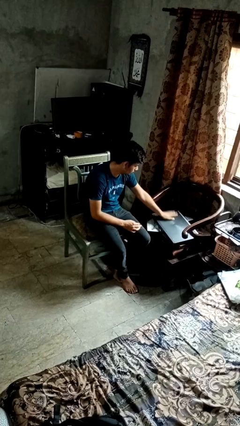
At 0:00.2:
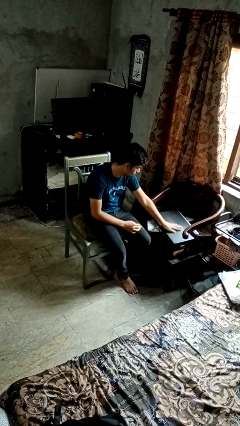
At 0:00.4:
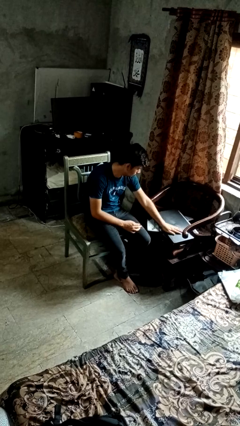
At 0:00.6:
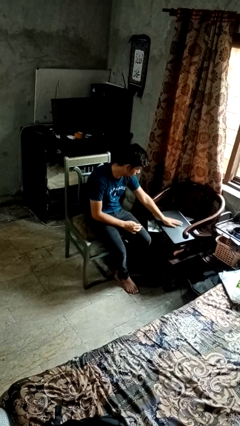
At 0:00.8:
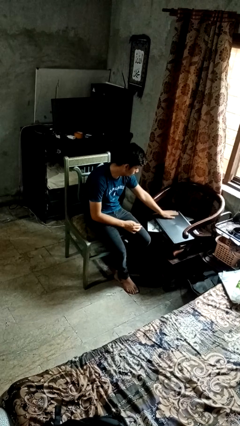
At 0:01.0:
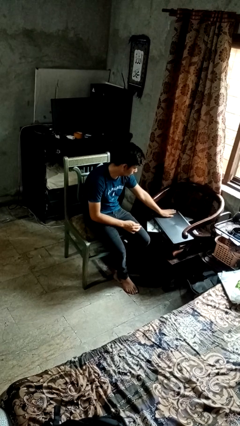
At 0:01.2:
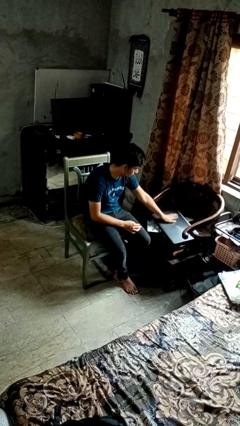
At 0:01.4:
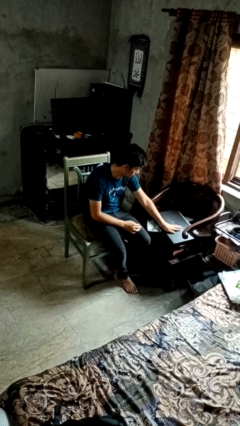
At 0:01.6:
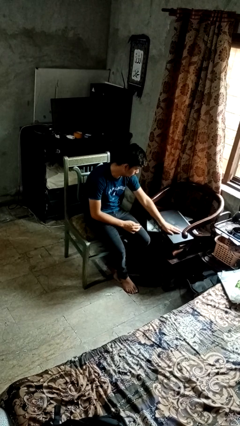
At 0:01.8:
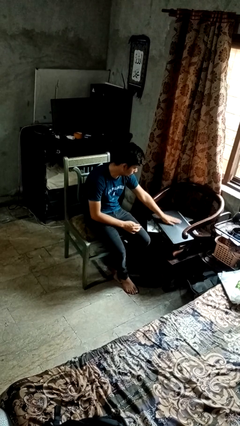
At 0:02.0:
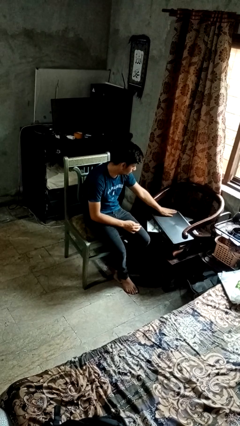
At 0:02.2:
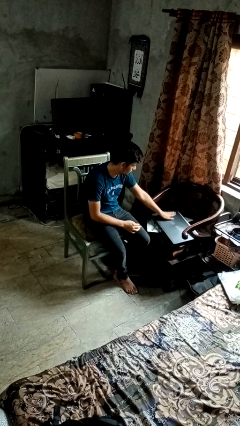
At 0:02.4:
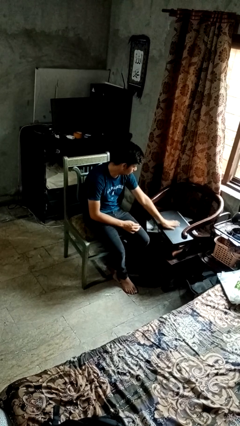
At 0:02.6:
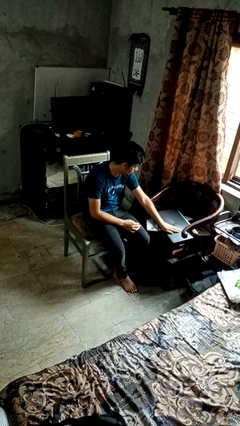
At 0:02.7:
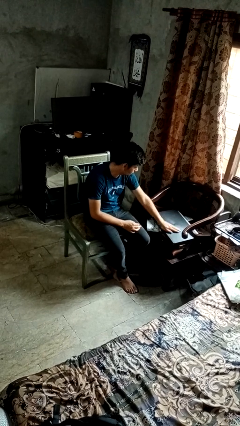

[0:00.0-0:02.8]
person waves hand over object

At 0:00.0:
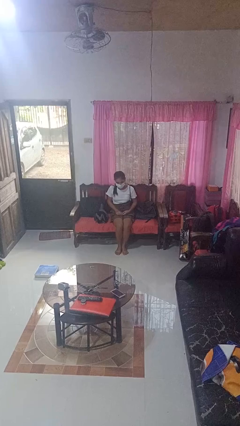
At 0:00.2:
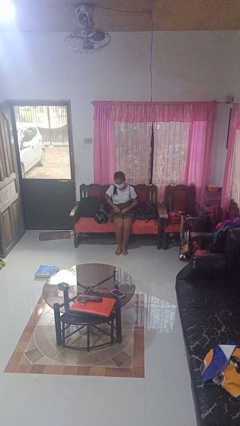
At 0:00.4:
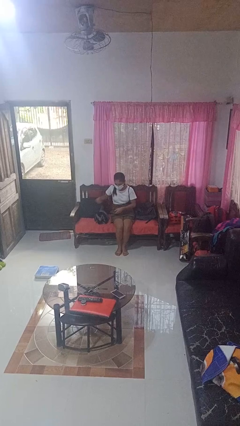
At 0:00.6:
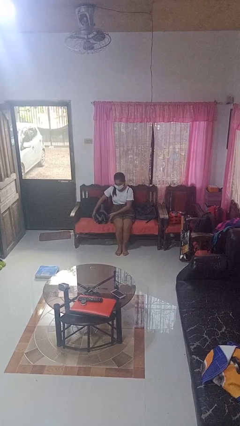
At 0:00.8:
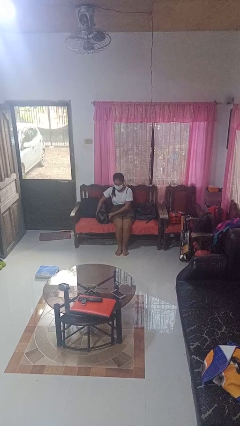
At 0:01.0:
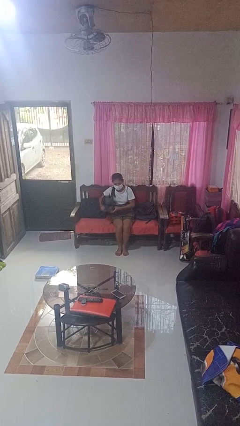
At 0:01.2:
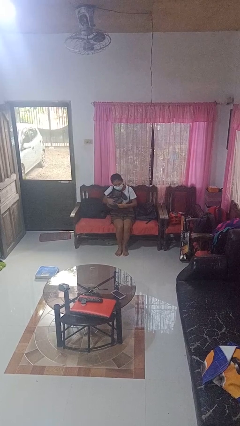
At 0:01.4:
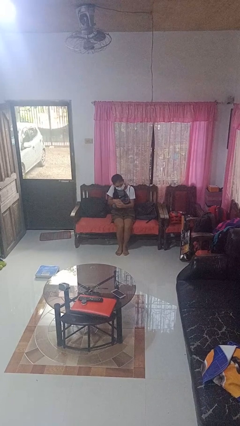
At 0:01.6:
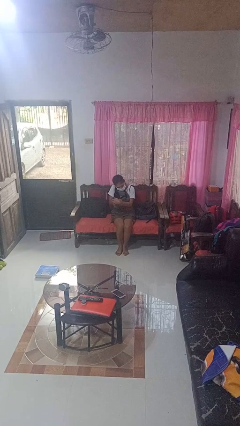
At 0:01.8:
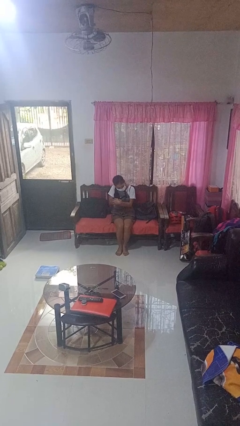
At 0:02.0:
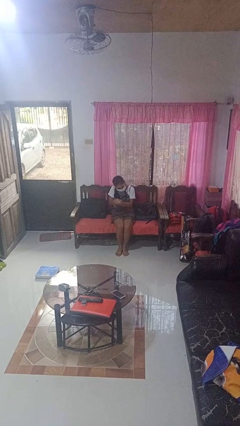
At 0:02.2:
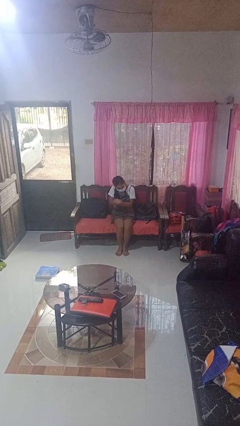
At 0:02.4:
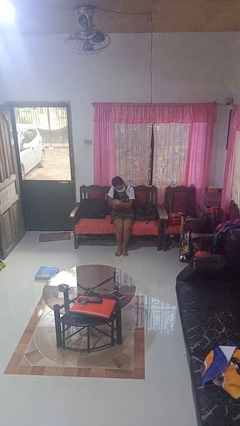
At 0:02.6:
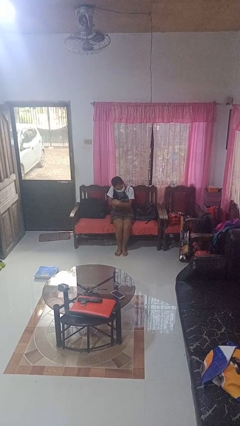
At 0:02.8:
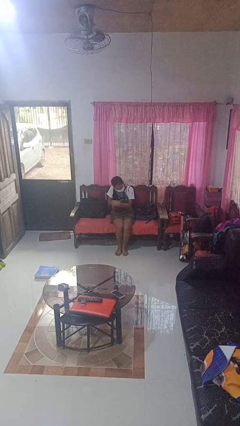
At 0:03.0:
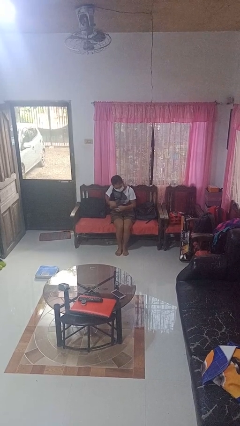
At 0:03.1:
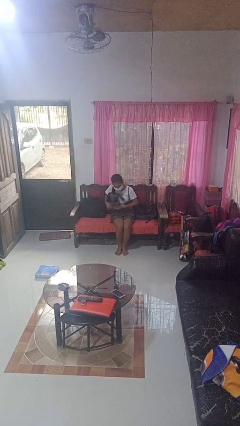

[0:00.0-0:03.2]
person hugs stuffed animal

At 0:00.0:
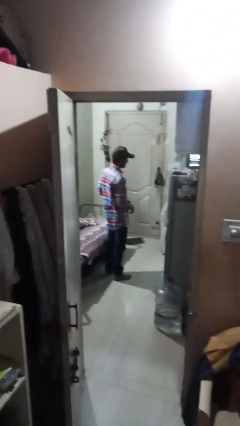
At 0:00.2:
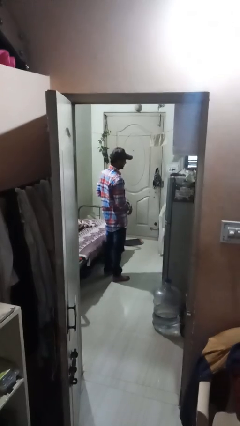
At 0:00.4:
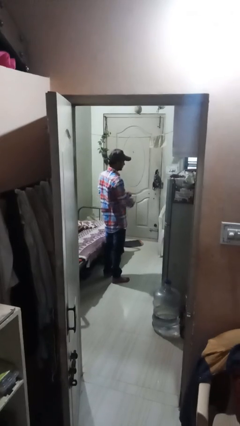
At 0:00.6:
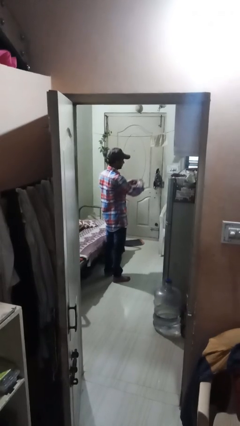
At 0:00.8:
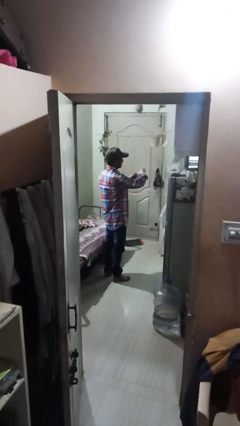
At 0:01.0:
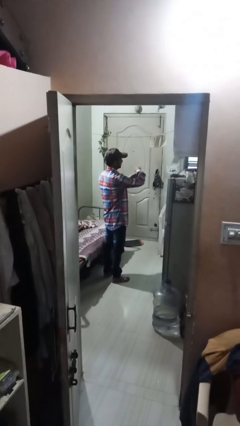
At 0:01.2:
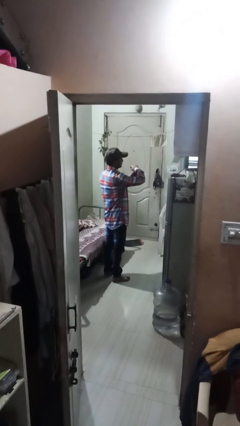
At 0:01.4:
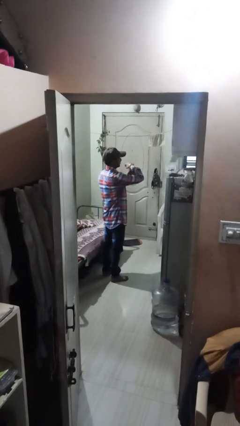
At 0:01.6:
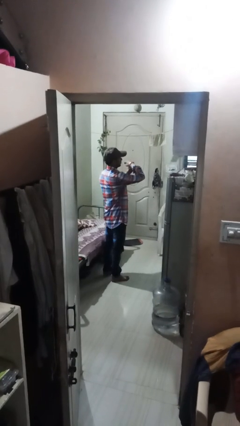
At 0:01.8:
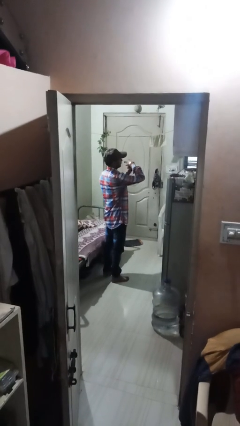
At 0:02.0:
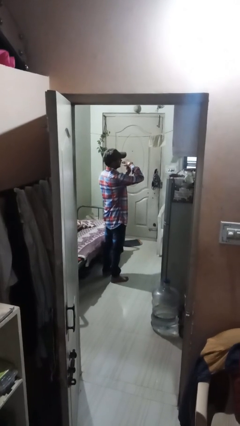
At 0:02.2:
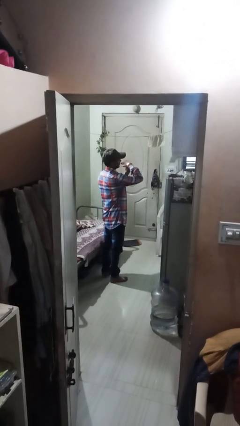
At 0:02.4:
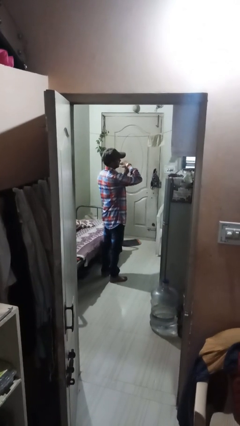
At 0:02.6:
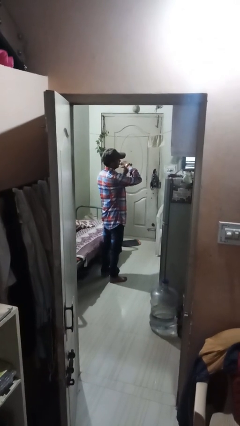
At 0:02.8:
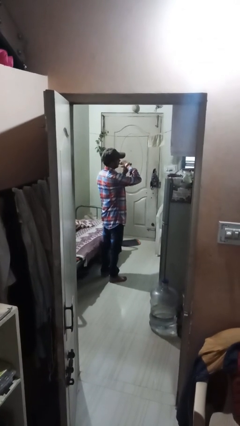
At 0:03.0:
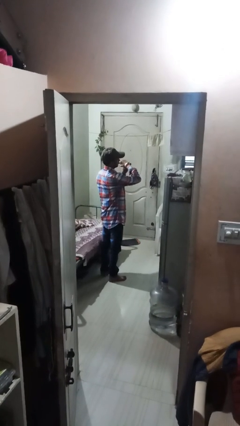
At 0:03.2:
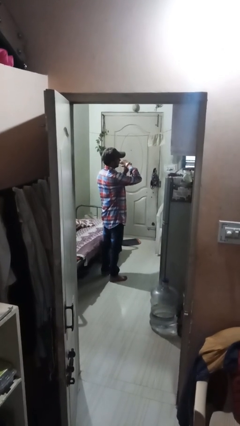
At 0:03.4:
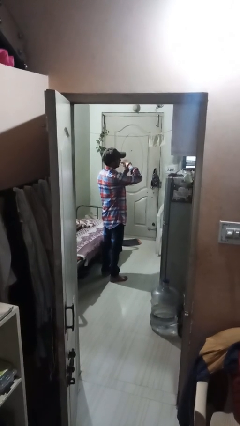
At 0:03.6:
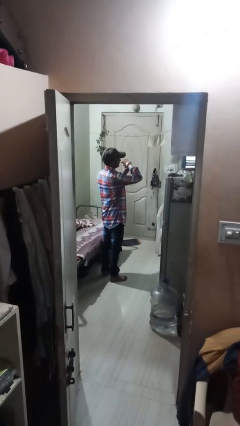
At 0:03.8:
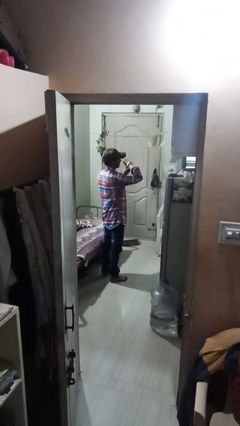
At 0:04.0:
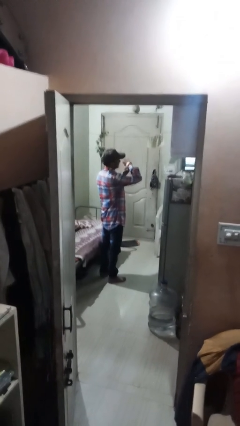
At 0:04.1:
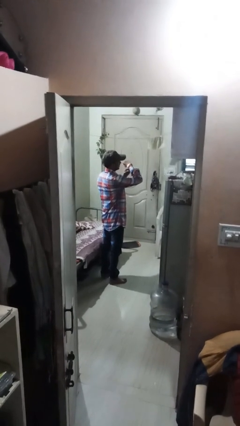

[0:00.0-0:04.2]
person puts on wristwatch

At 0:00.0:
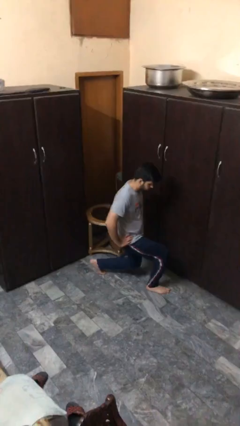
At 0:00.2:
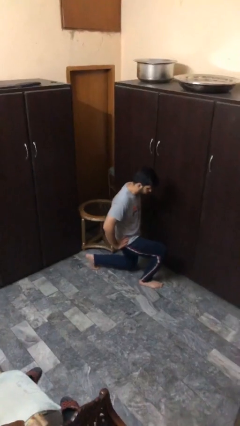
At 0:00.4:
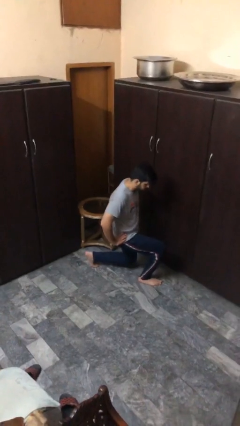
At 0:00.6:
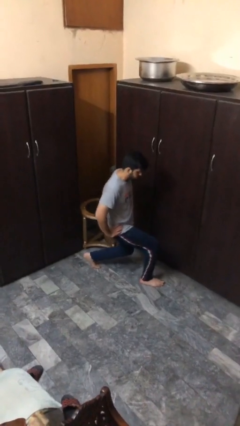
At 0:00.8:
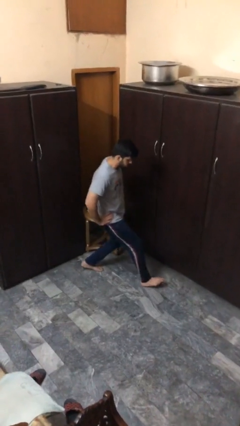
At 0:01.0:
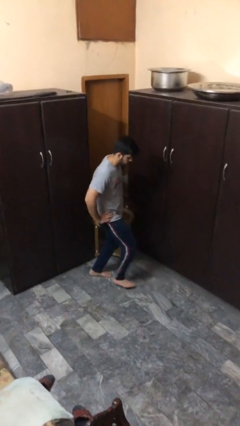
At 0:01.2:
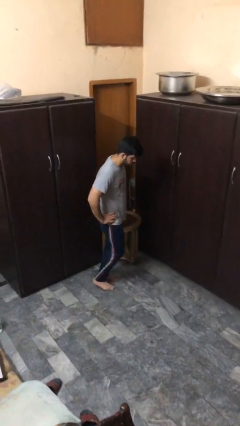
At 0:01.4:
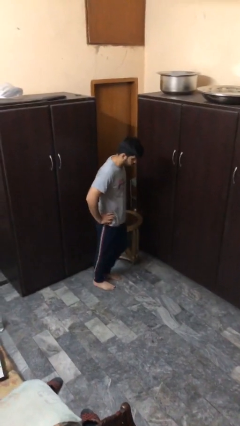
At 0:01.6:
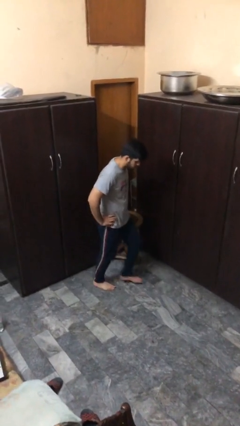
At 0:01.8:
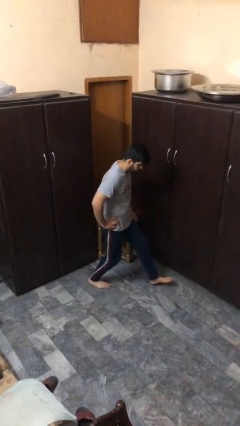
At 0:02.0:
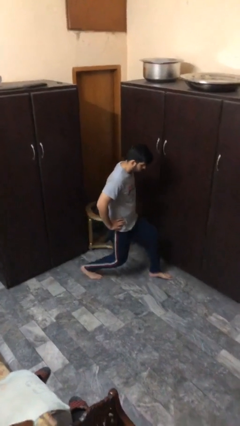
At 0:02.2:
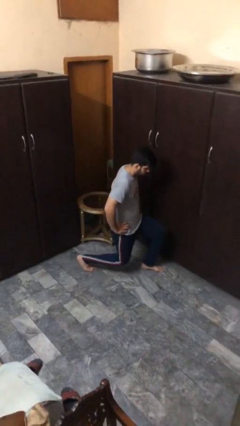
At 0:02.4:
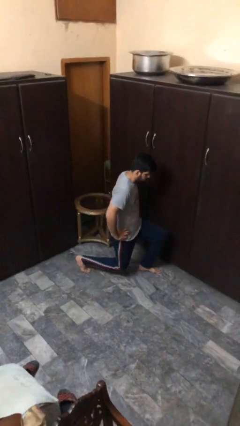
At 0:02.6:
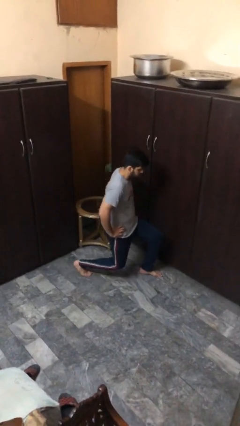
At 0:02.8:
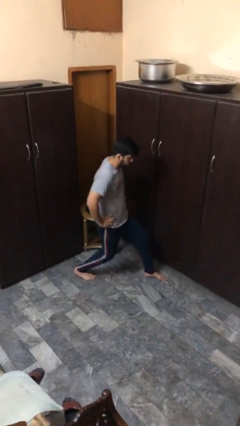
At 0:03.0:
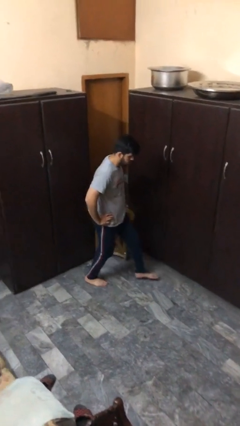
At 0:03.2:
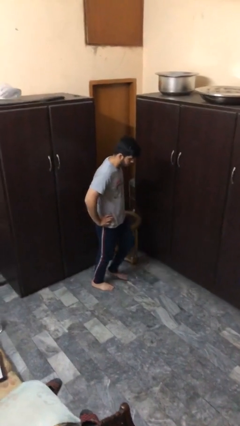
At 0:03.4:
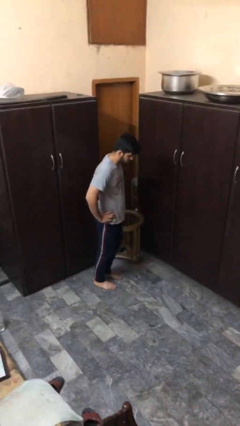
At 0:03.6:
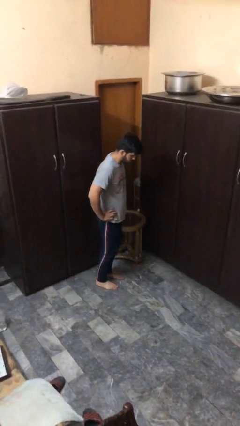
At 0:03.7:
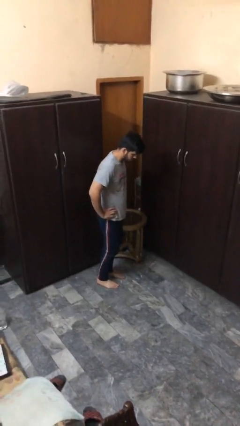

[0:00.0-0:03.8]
person exercises with lunges

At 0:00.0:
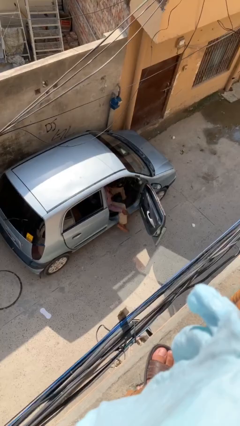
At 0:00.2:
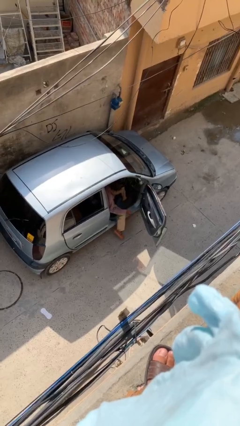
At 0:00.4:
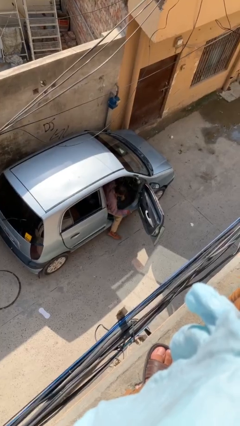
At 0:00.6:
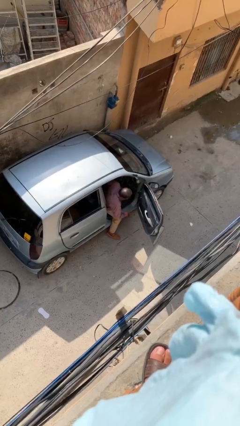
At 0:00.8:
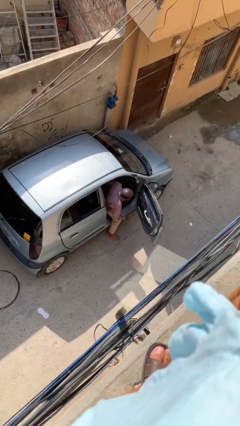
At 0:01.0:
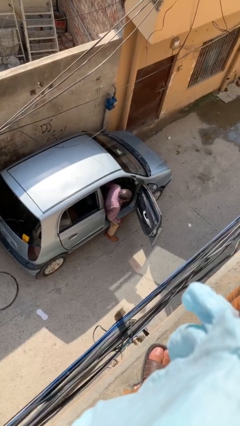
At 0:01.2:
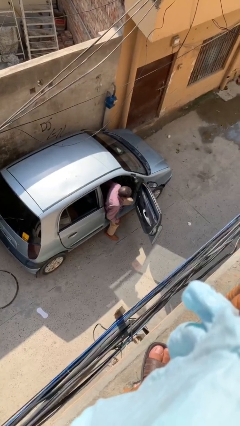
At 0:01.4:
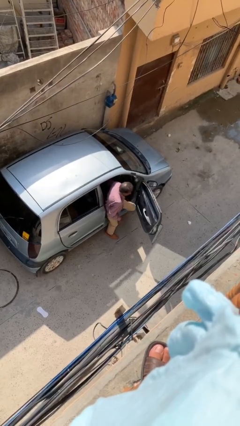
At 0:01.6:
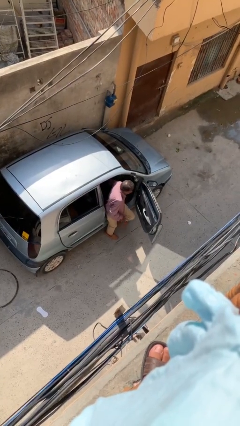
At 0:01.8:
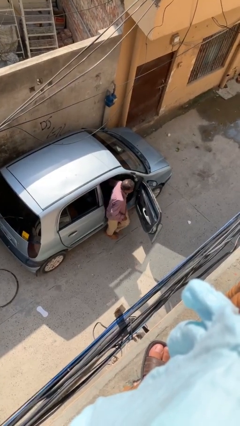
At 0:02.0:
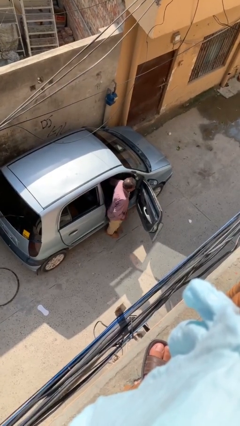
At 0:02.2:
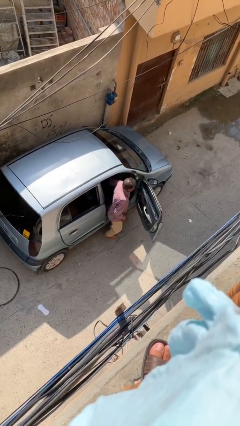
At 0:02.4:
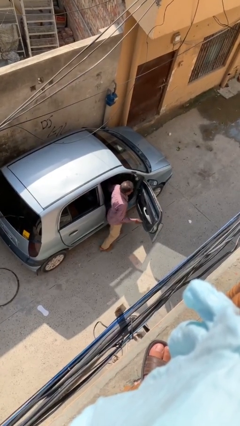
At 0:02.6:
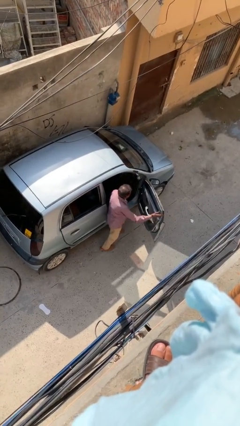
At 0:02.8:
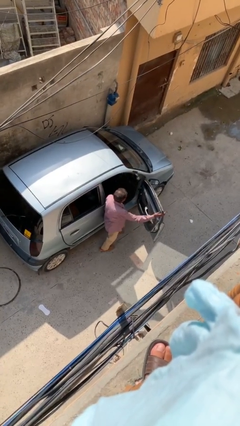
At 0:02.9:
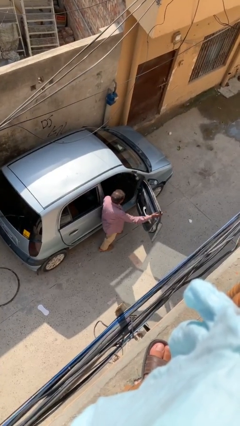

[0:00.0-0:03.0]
person exits car

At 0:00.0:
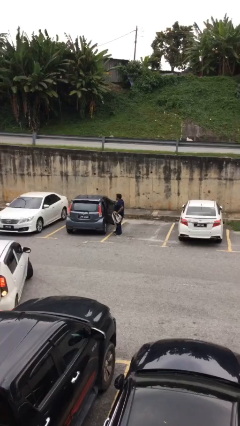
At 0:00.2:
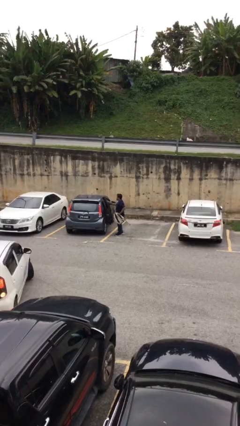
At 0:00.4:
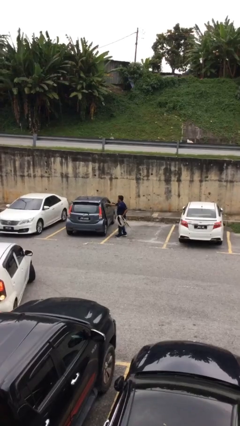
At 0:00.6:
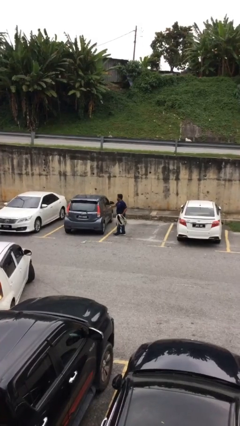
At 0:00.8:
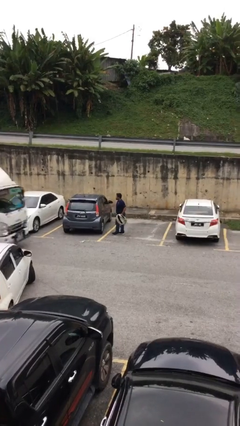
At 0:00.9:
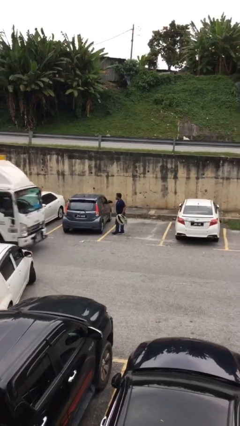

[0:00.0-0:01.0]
person closes car door
